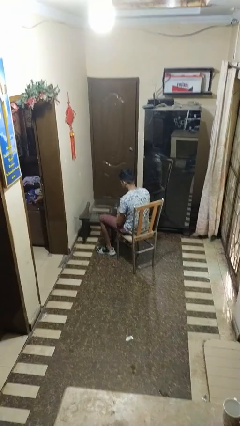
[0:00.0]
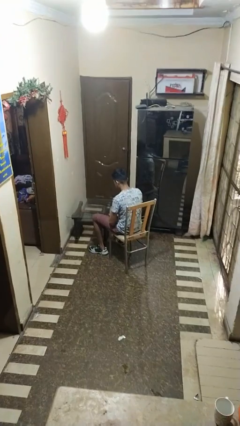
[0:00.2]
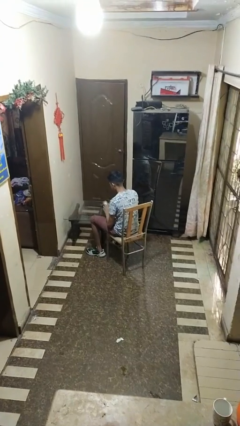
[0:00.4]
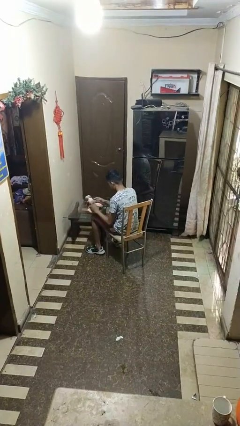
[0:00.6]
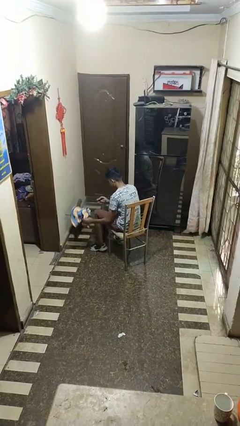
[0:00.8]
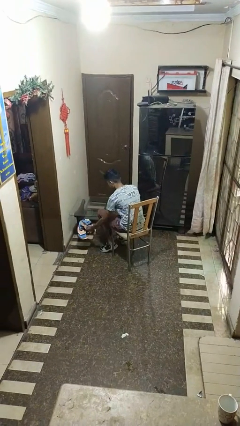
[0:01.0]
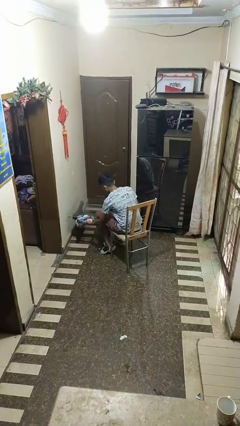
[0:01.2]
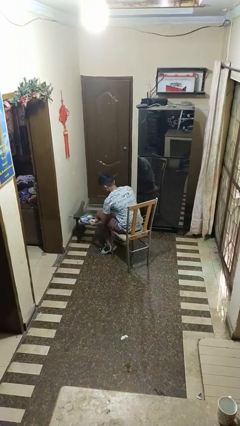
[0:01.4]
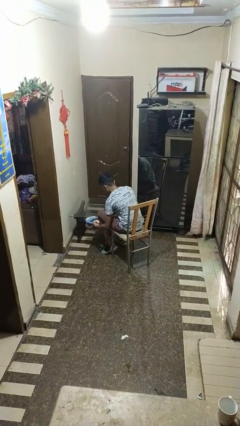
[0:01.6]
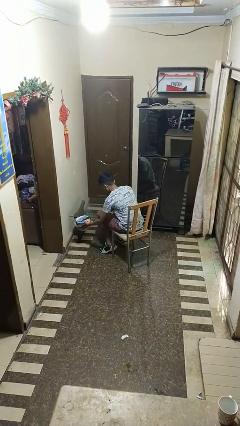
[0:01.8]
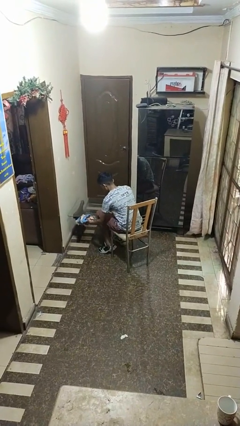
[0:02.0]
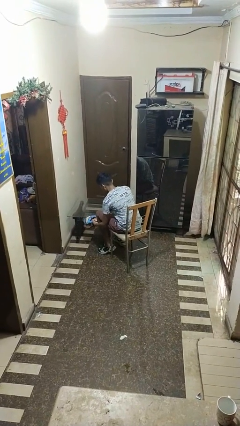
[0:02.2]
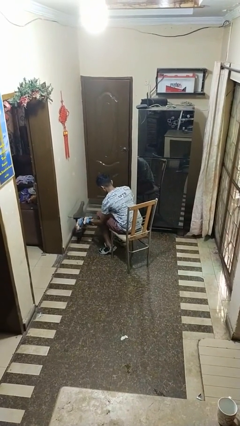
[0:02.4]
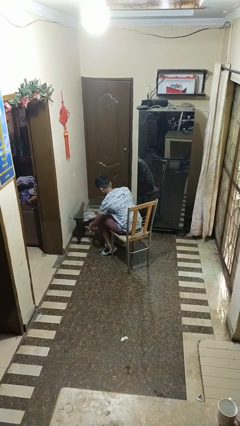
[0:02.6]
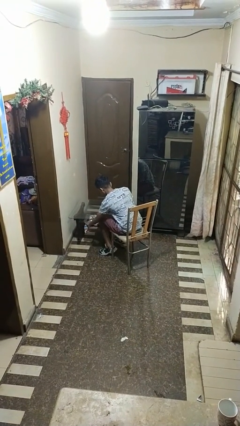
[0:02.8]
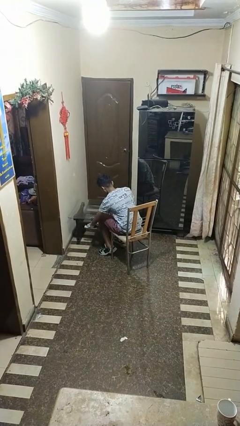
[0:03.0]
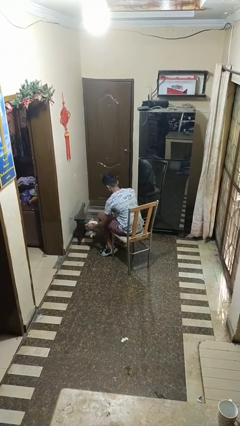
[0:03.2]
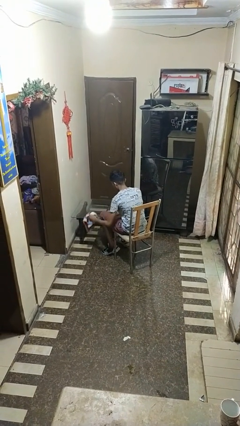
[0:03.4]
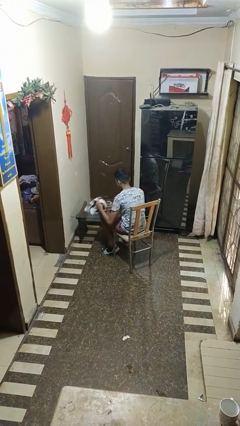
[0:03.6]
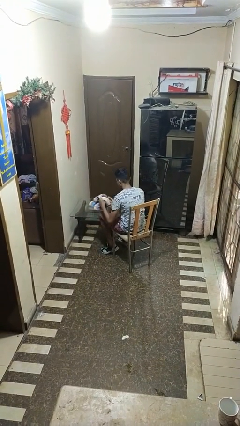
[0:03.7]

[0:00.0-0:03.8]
person cleans table with rag

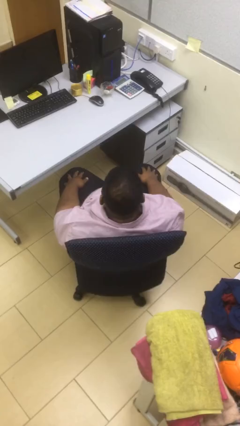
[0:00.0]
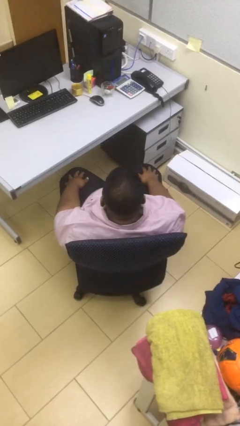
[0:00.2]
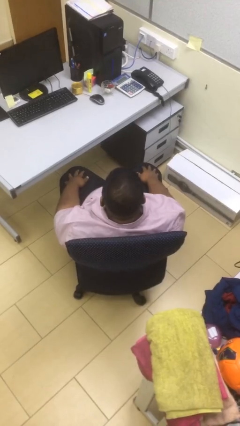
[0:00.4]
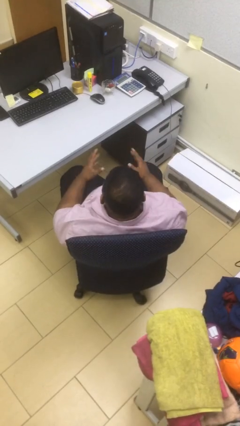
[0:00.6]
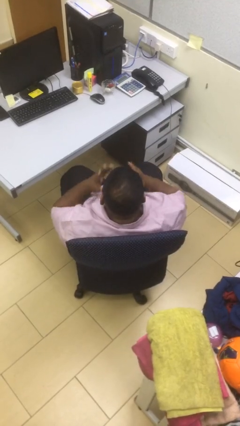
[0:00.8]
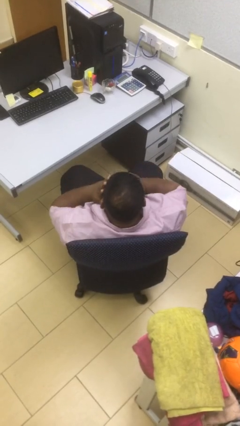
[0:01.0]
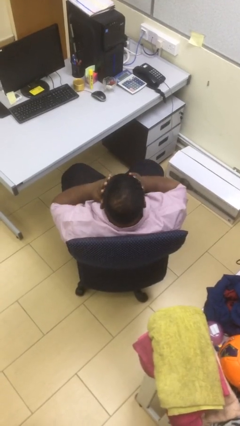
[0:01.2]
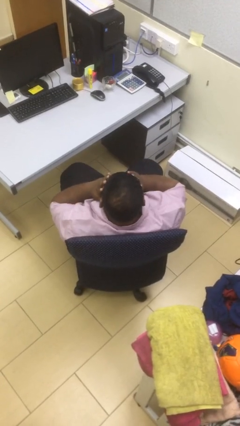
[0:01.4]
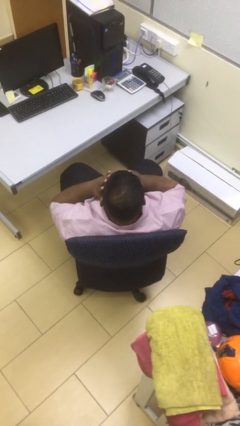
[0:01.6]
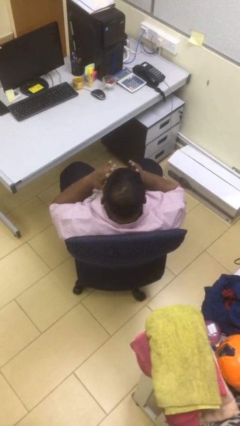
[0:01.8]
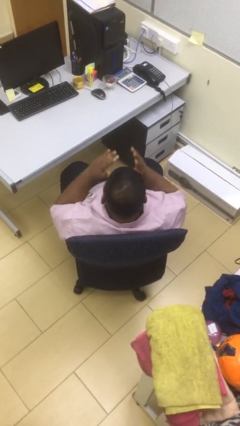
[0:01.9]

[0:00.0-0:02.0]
person covers face with hands

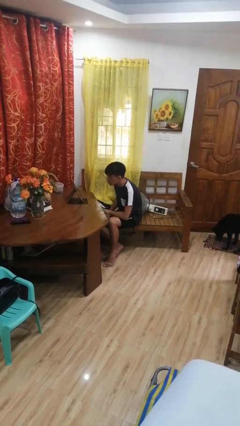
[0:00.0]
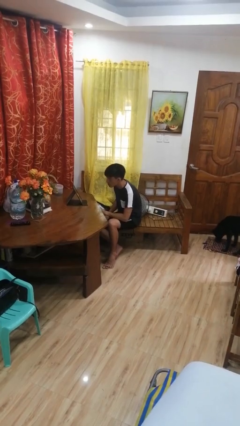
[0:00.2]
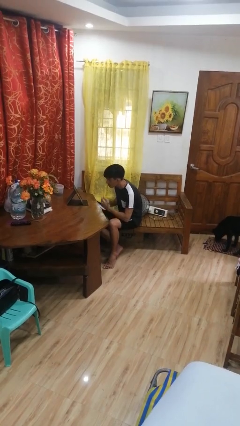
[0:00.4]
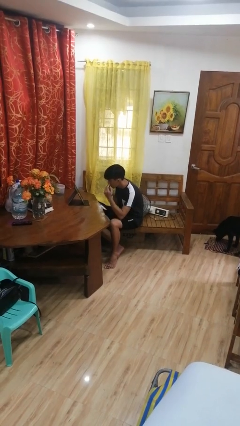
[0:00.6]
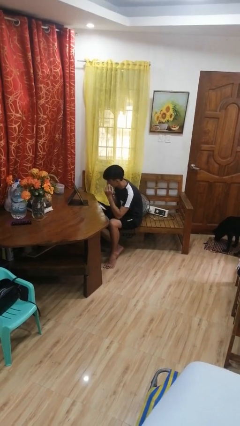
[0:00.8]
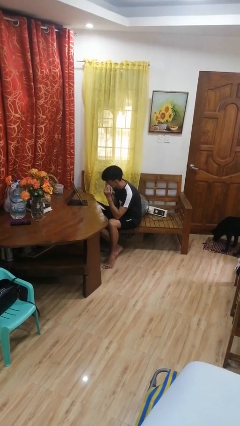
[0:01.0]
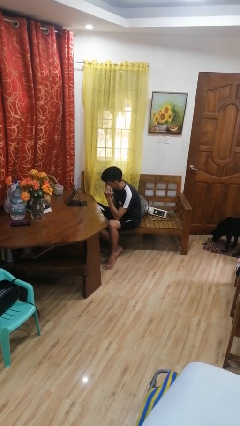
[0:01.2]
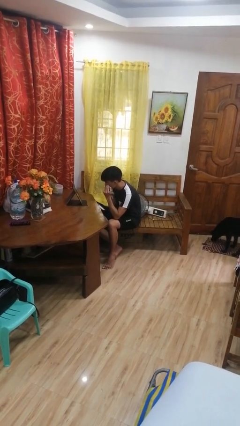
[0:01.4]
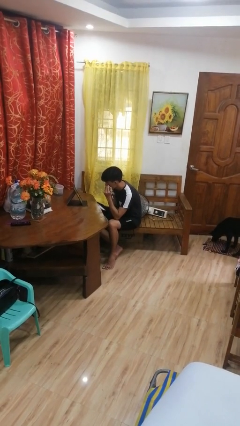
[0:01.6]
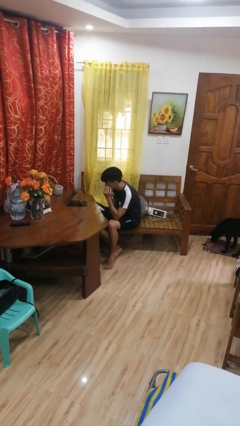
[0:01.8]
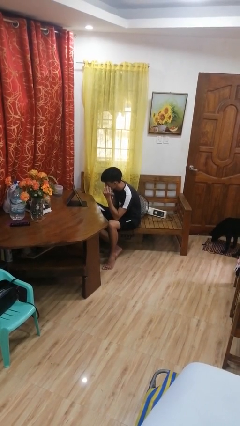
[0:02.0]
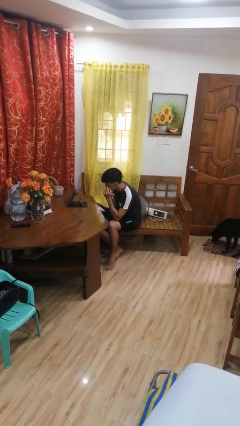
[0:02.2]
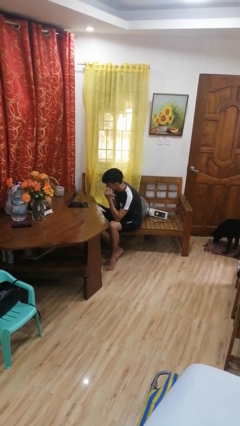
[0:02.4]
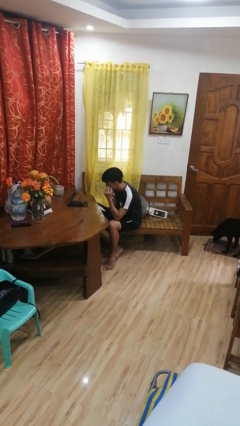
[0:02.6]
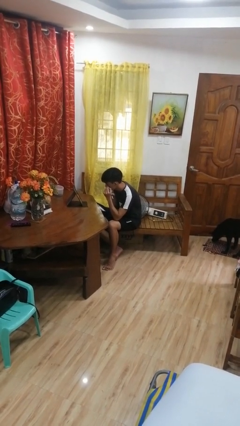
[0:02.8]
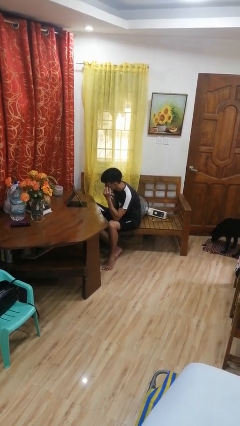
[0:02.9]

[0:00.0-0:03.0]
person applies eye makeup

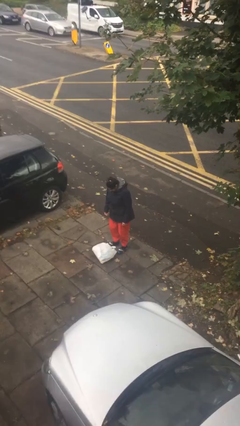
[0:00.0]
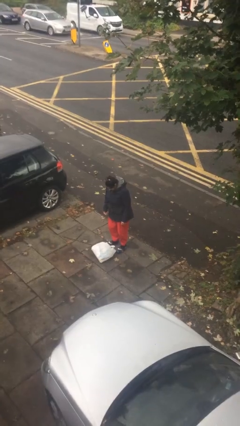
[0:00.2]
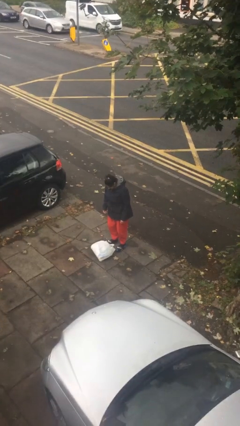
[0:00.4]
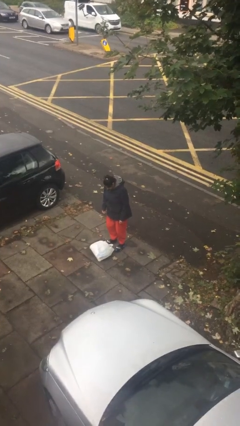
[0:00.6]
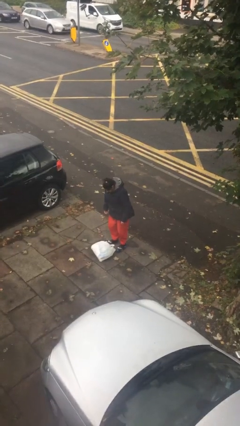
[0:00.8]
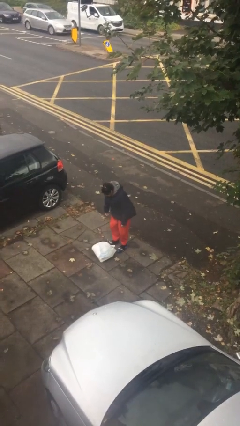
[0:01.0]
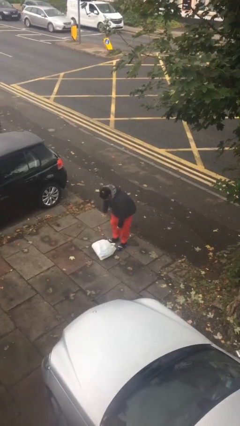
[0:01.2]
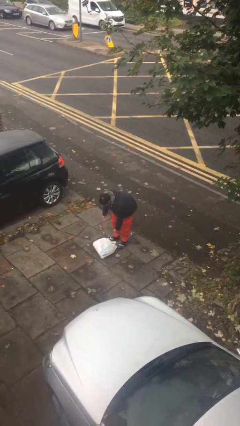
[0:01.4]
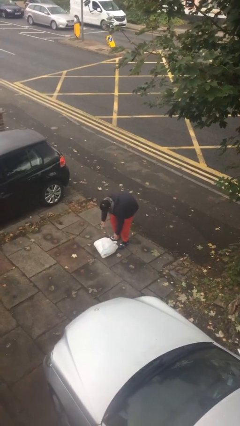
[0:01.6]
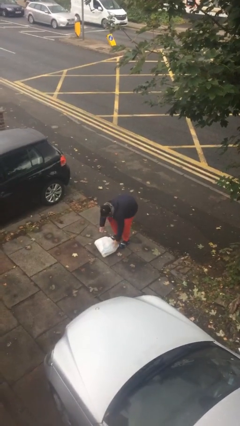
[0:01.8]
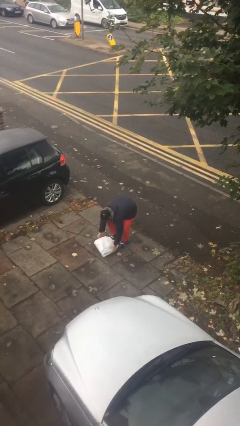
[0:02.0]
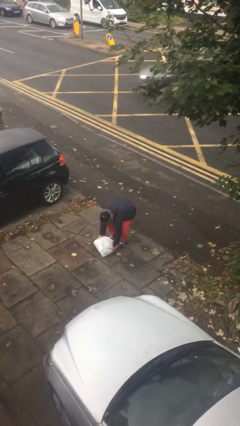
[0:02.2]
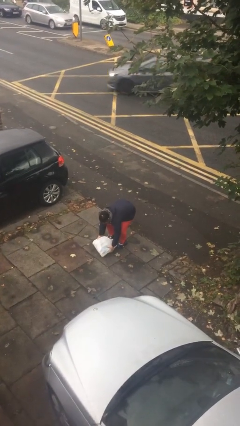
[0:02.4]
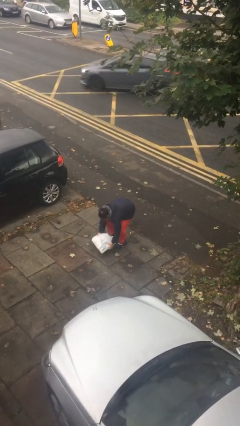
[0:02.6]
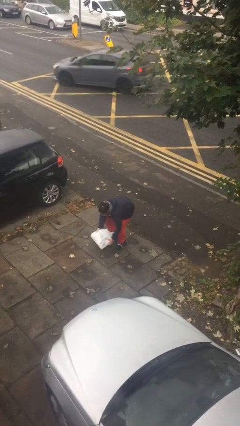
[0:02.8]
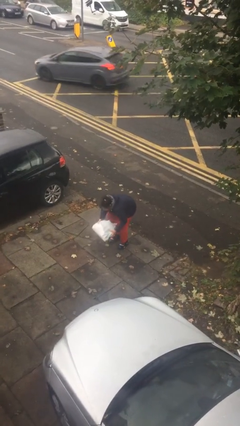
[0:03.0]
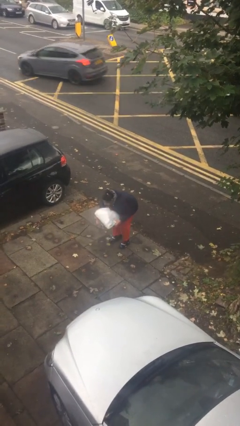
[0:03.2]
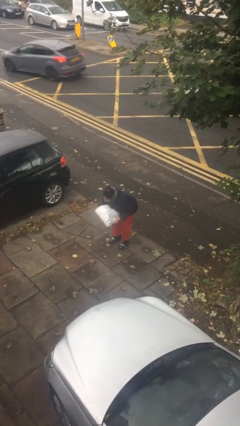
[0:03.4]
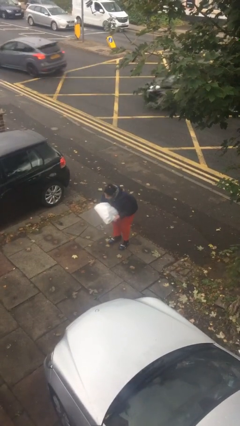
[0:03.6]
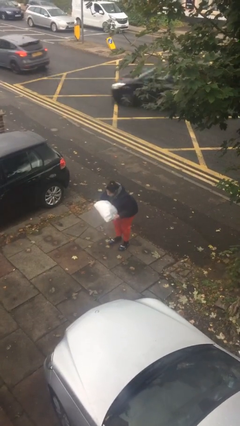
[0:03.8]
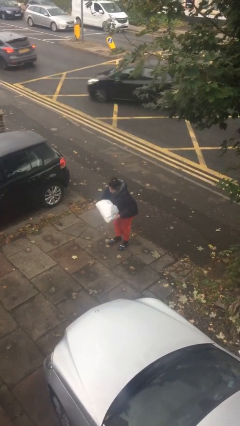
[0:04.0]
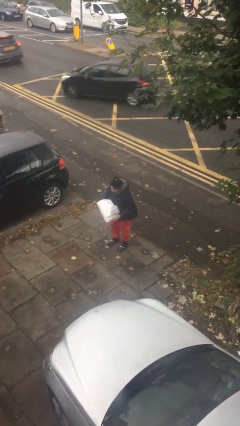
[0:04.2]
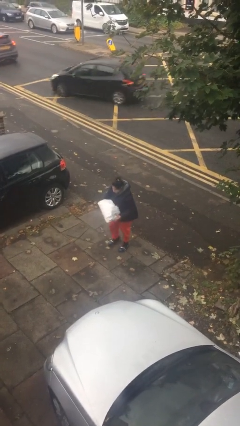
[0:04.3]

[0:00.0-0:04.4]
person picks up object from floor

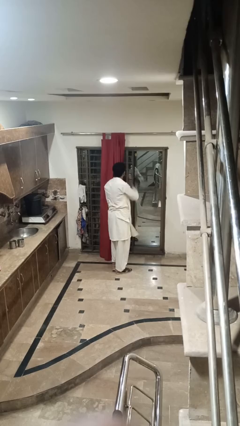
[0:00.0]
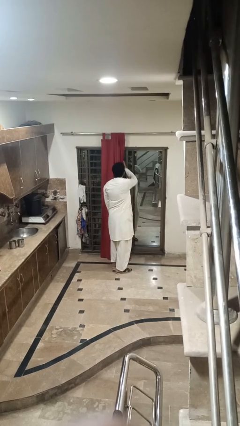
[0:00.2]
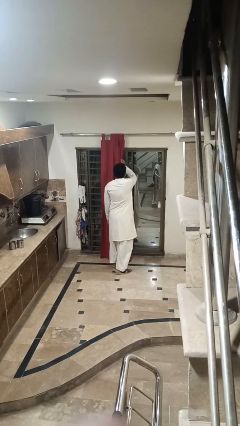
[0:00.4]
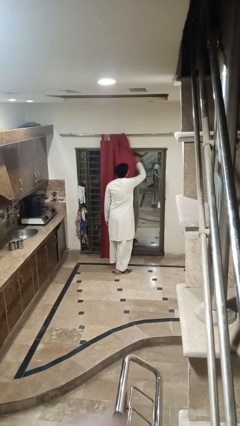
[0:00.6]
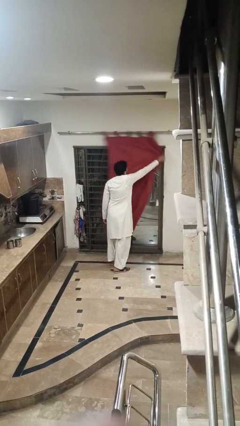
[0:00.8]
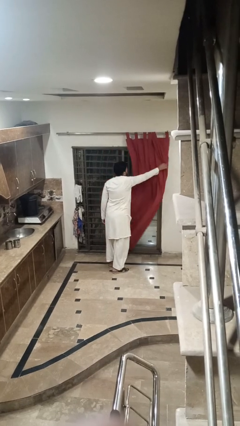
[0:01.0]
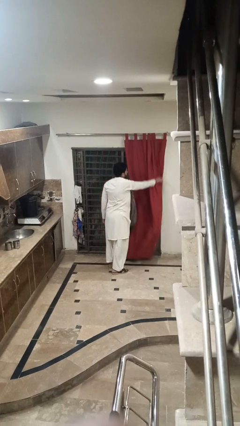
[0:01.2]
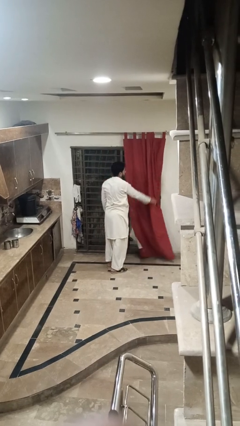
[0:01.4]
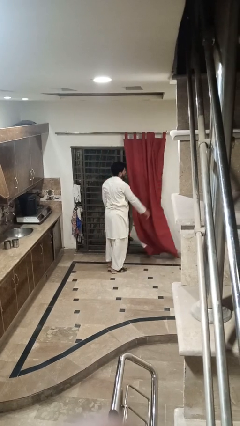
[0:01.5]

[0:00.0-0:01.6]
person closes curtains

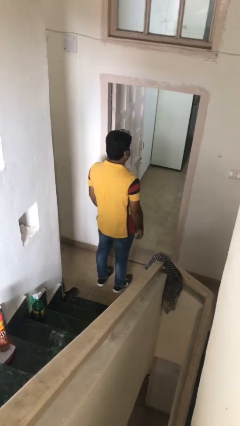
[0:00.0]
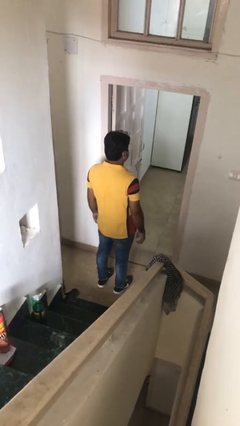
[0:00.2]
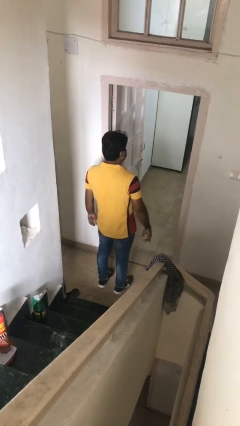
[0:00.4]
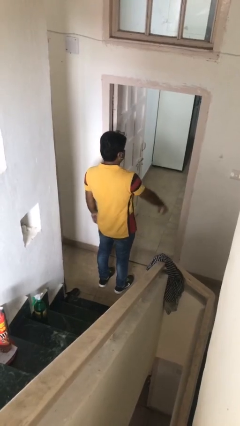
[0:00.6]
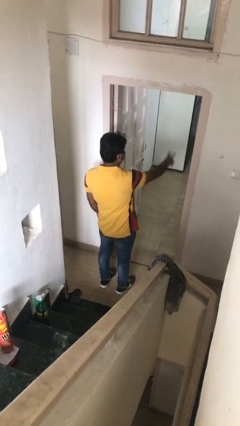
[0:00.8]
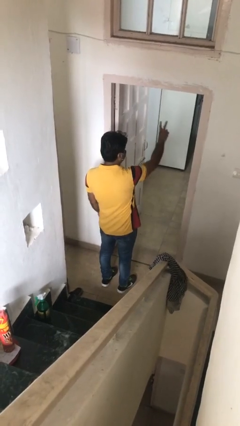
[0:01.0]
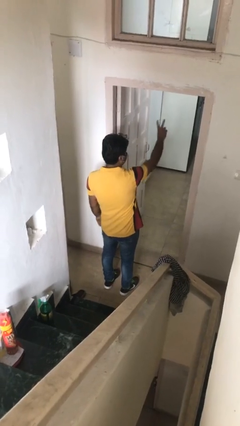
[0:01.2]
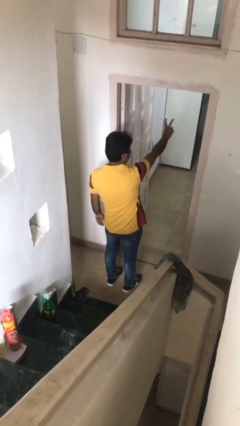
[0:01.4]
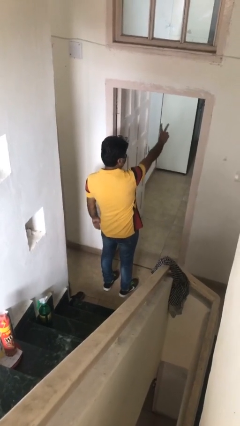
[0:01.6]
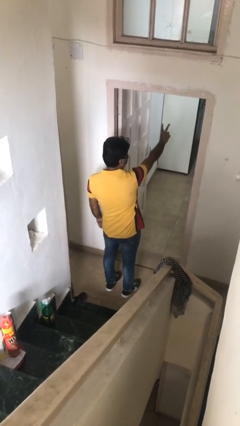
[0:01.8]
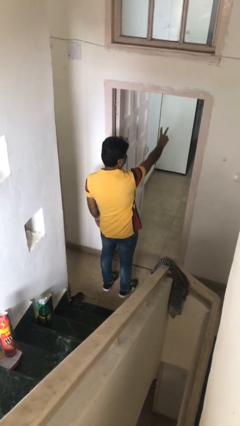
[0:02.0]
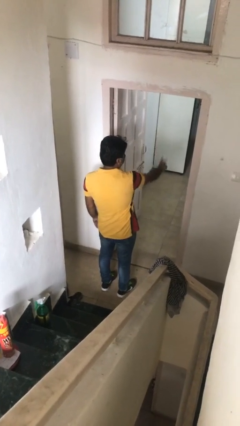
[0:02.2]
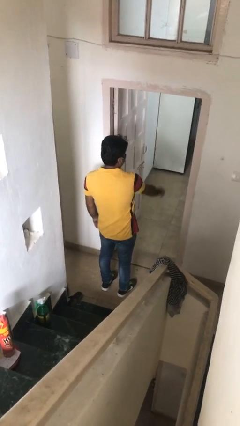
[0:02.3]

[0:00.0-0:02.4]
person gestures peace

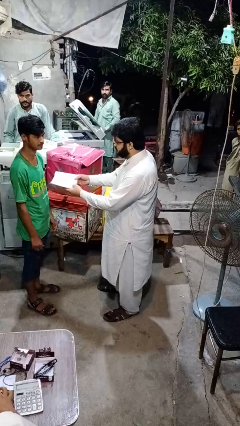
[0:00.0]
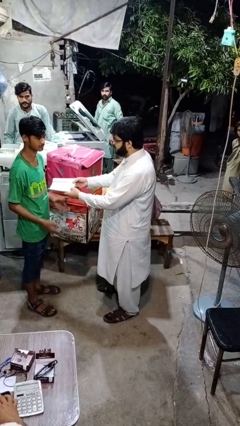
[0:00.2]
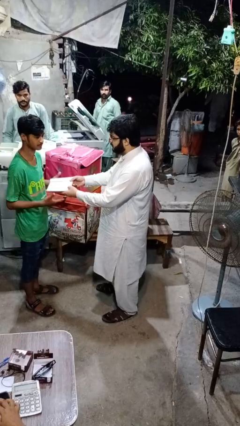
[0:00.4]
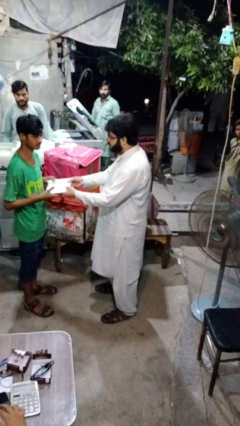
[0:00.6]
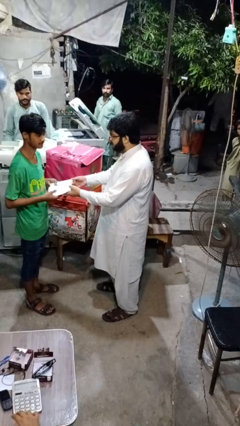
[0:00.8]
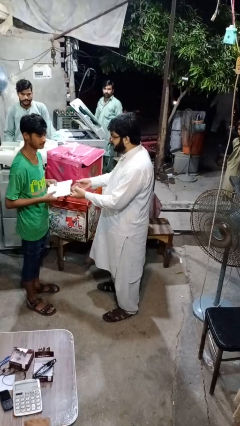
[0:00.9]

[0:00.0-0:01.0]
person transfers object to person
